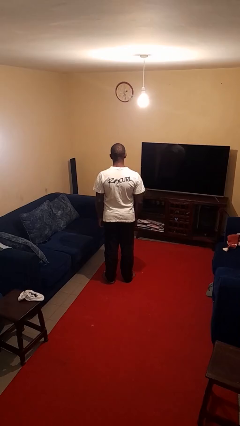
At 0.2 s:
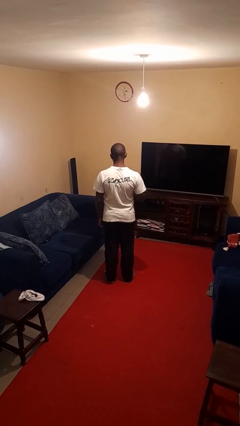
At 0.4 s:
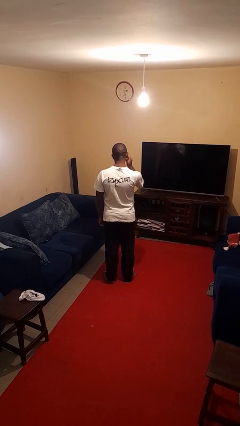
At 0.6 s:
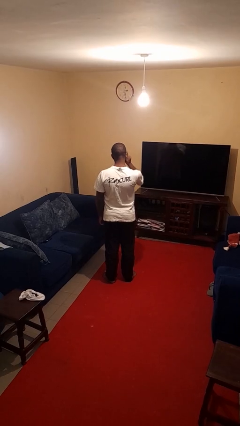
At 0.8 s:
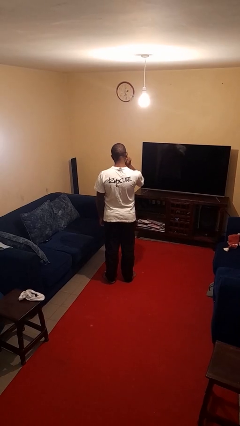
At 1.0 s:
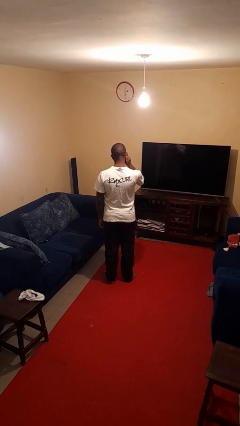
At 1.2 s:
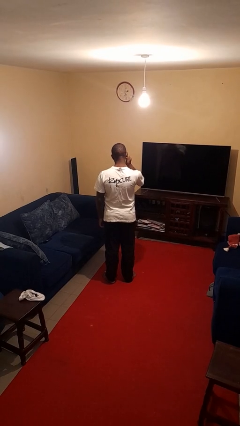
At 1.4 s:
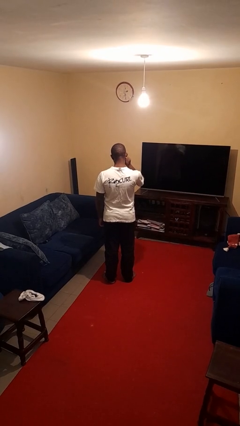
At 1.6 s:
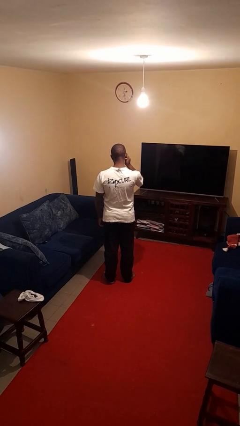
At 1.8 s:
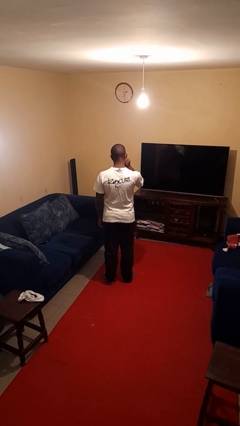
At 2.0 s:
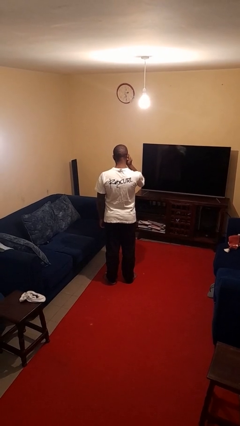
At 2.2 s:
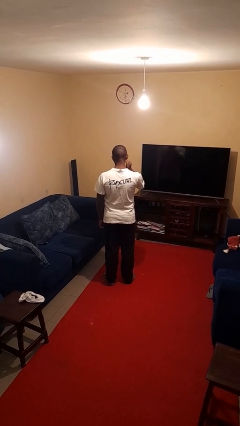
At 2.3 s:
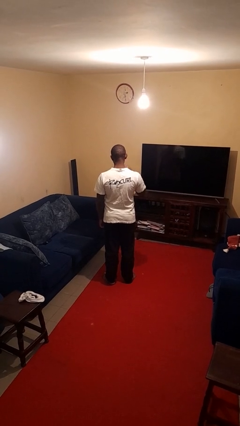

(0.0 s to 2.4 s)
person touches earlobe

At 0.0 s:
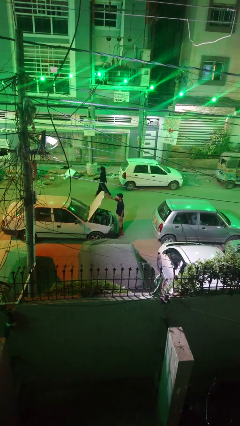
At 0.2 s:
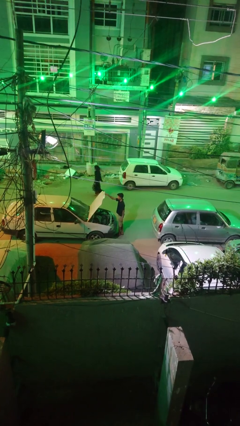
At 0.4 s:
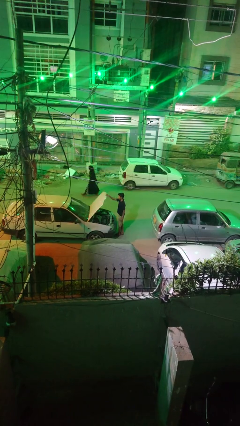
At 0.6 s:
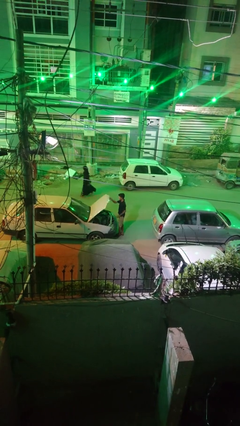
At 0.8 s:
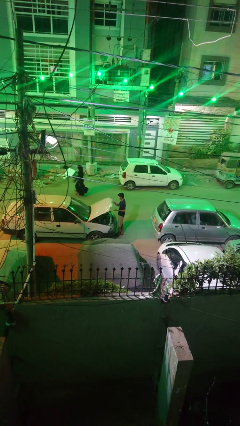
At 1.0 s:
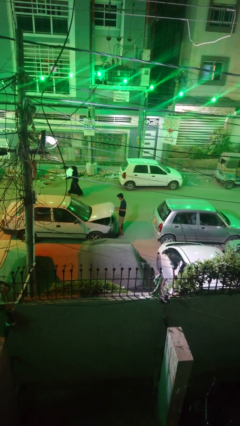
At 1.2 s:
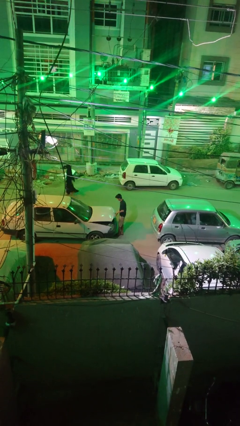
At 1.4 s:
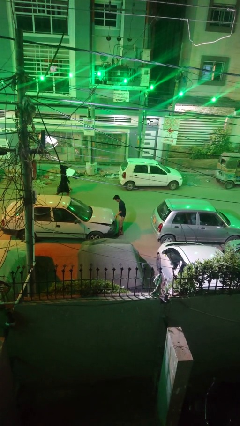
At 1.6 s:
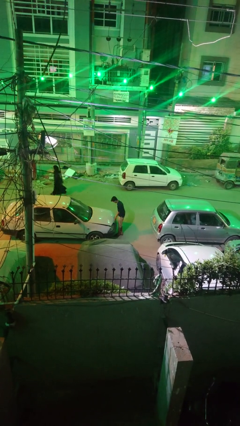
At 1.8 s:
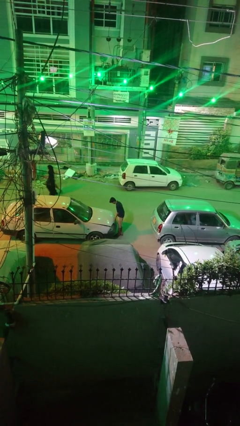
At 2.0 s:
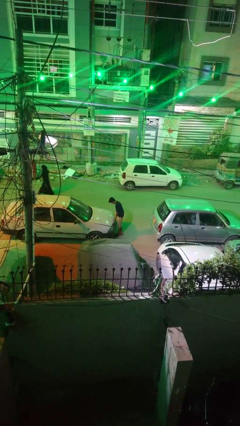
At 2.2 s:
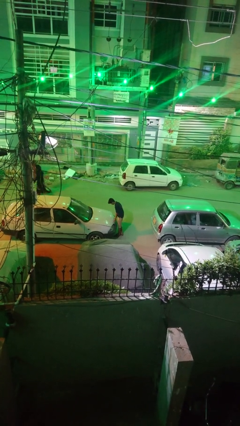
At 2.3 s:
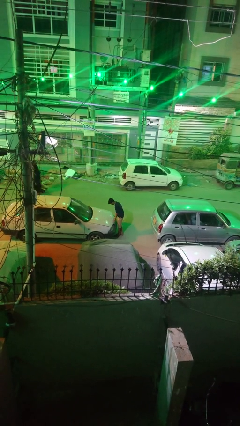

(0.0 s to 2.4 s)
person closes car hood

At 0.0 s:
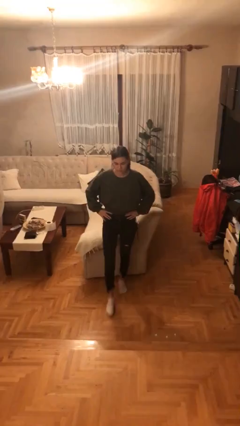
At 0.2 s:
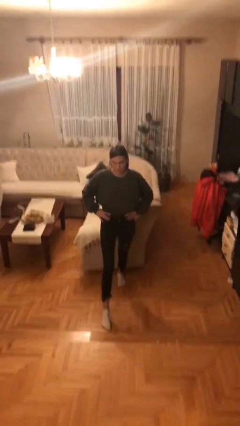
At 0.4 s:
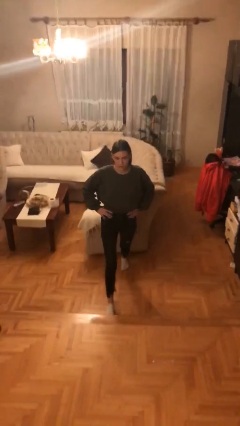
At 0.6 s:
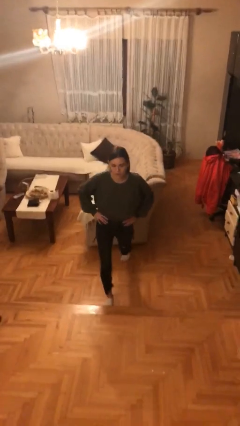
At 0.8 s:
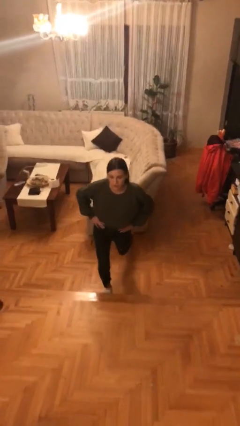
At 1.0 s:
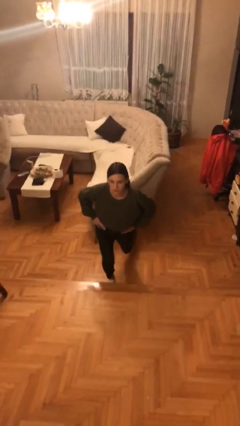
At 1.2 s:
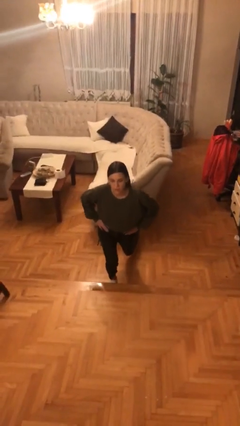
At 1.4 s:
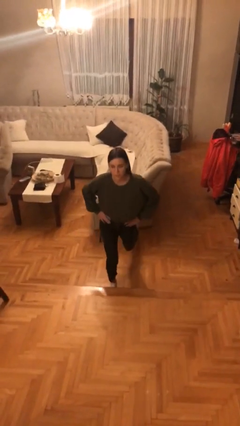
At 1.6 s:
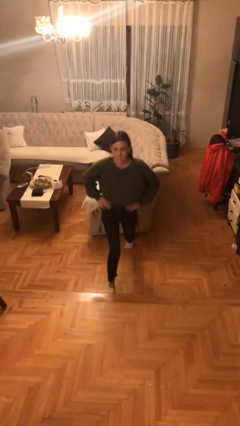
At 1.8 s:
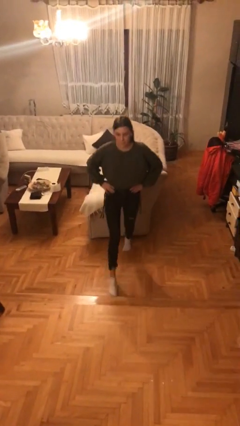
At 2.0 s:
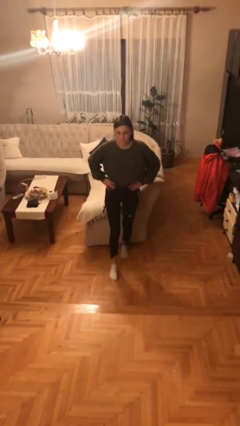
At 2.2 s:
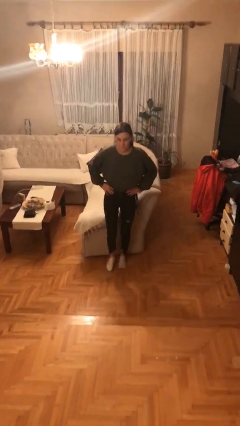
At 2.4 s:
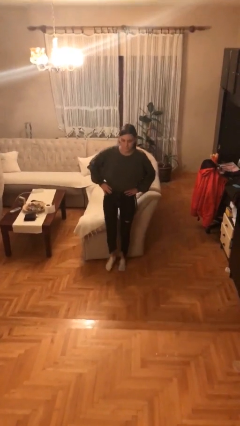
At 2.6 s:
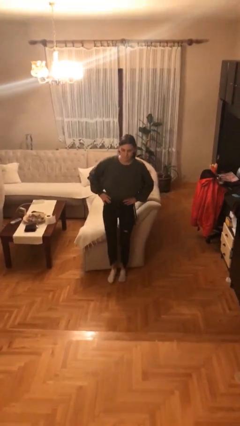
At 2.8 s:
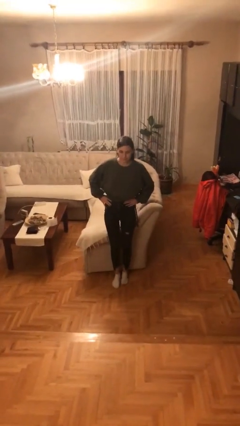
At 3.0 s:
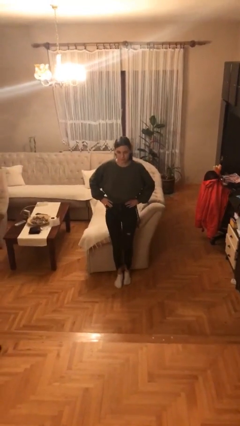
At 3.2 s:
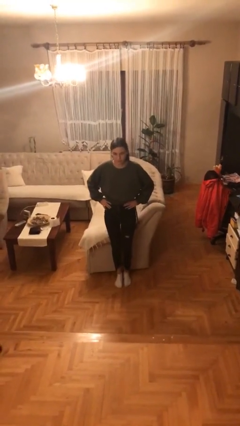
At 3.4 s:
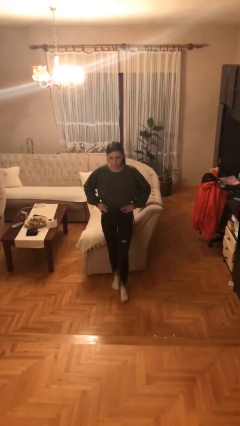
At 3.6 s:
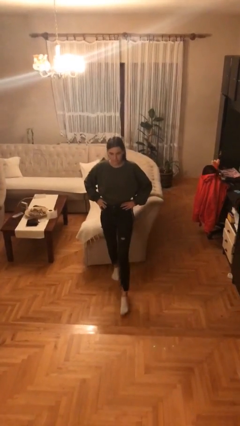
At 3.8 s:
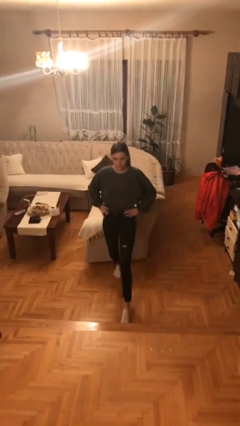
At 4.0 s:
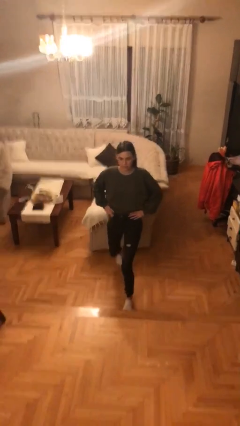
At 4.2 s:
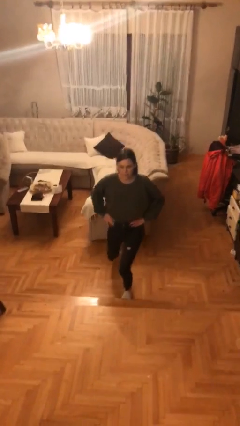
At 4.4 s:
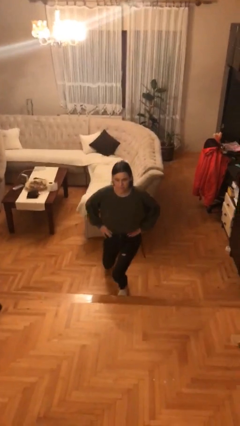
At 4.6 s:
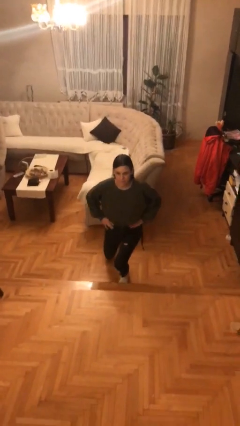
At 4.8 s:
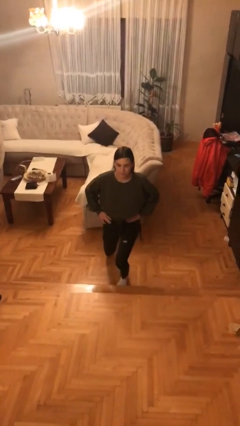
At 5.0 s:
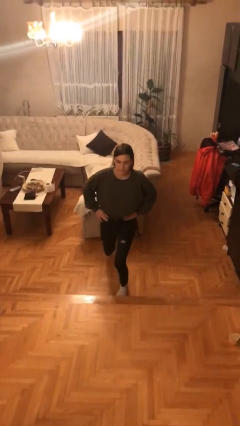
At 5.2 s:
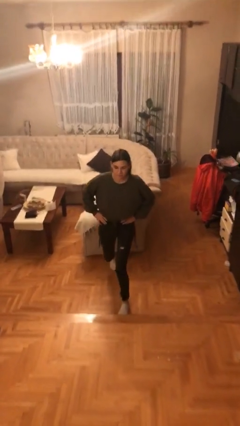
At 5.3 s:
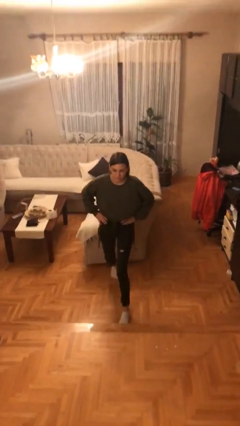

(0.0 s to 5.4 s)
person exercises with lunges

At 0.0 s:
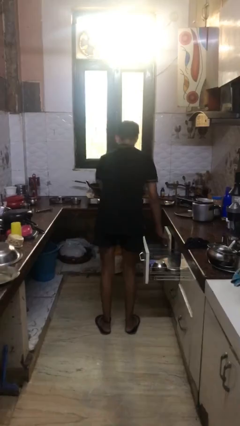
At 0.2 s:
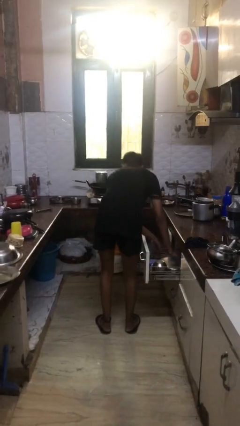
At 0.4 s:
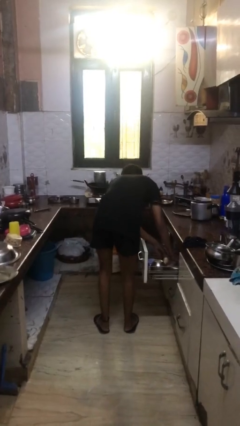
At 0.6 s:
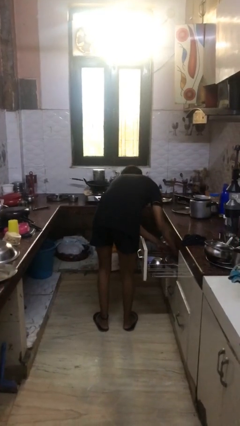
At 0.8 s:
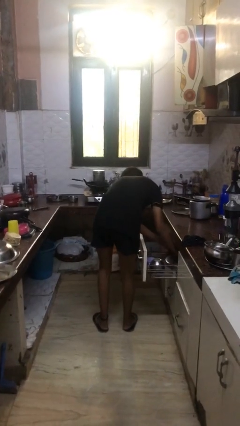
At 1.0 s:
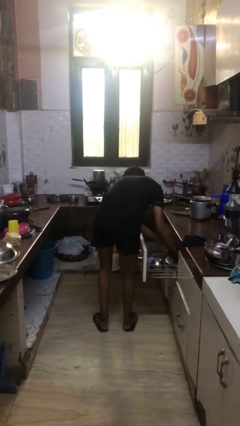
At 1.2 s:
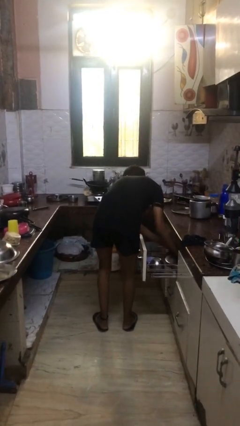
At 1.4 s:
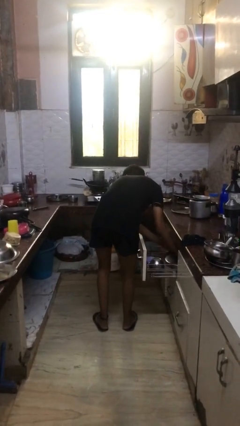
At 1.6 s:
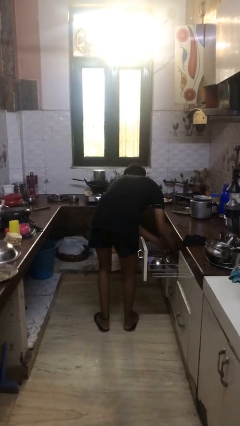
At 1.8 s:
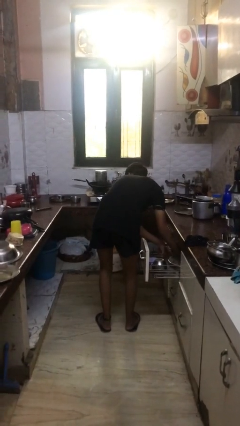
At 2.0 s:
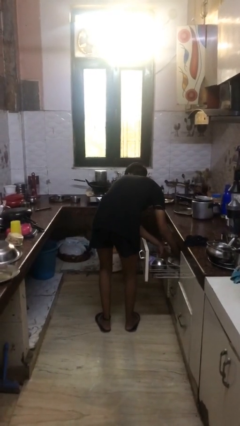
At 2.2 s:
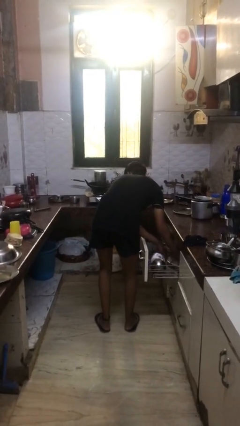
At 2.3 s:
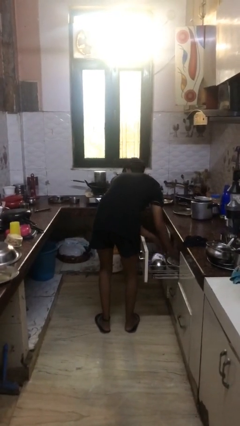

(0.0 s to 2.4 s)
person searches in kitchen drawer

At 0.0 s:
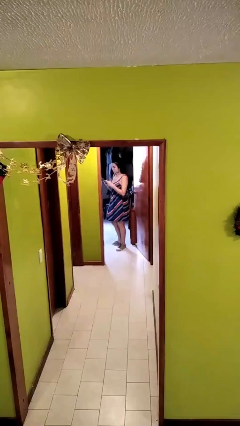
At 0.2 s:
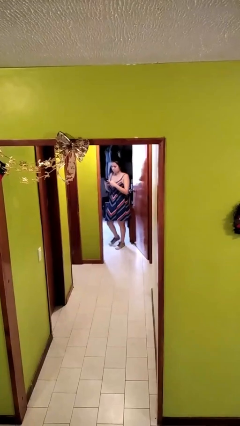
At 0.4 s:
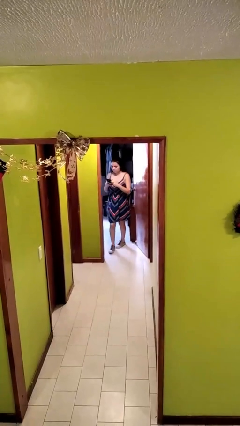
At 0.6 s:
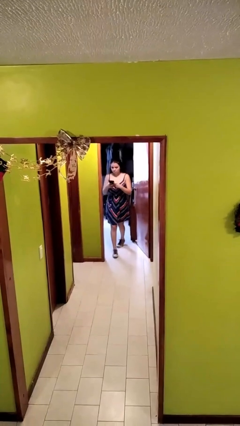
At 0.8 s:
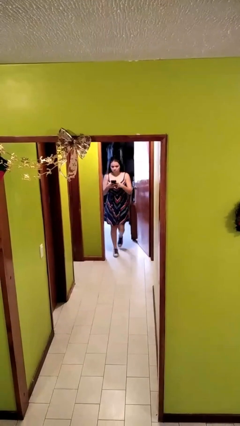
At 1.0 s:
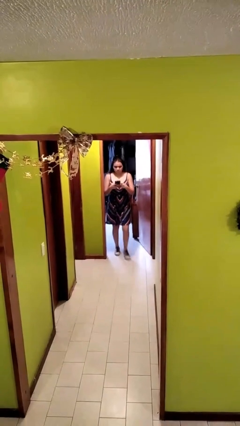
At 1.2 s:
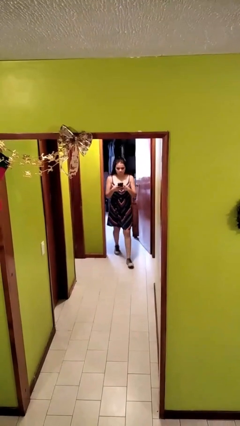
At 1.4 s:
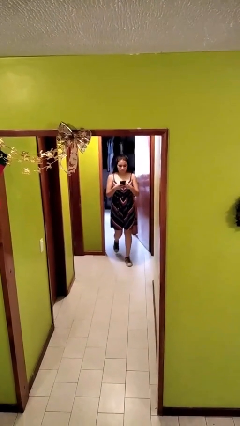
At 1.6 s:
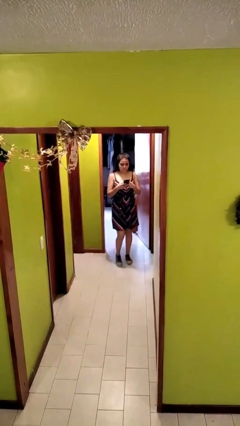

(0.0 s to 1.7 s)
person exits scene through structure

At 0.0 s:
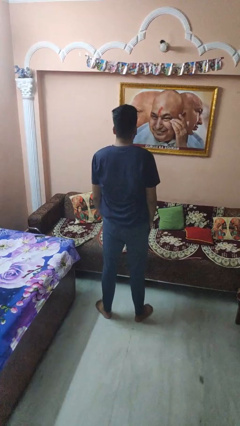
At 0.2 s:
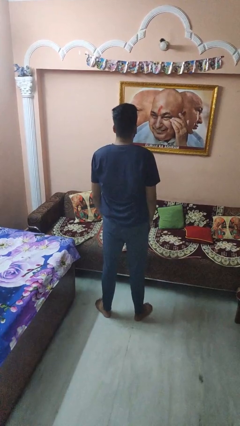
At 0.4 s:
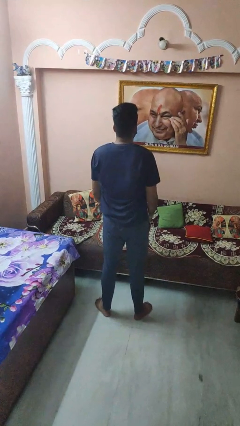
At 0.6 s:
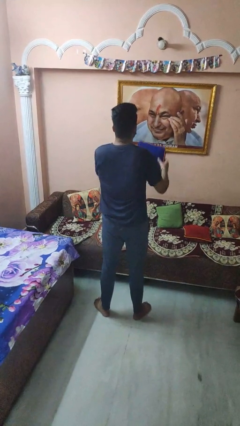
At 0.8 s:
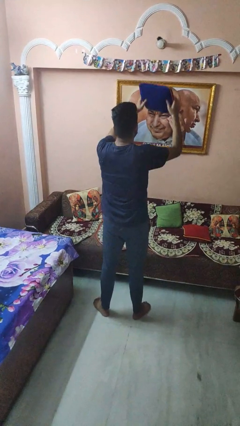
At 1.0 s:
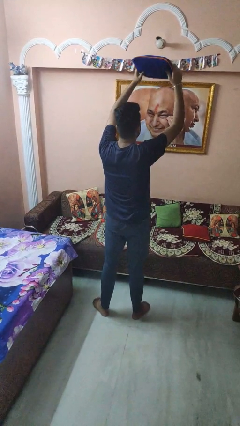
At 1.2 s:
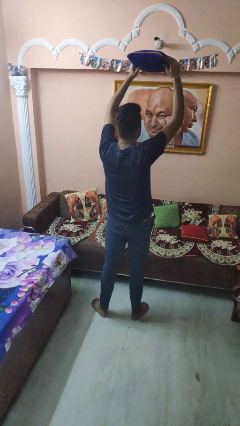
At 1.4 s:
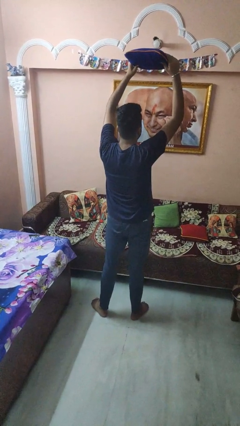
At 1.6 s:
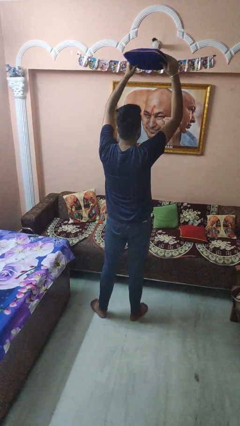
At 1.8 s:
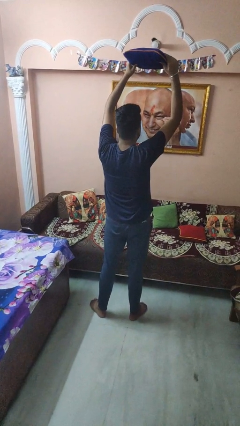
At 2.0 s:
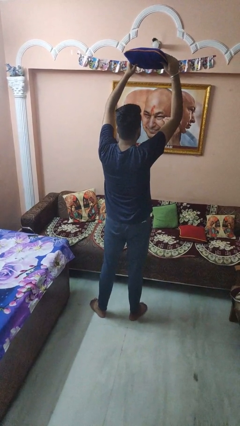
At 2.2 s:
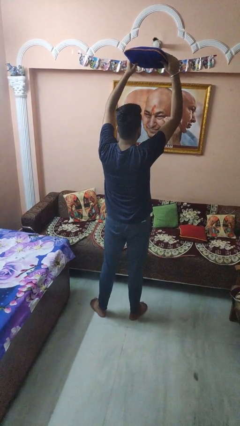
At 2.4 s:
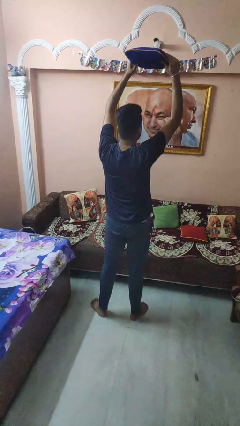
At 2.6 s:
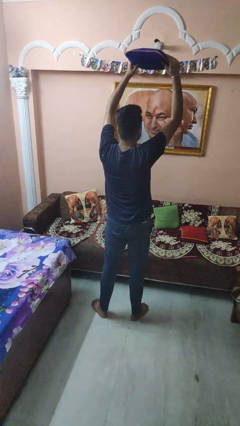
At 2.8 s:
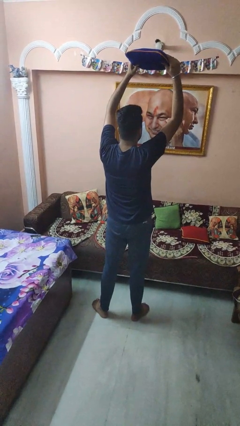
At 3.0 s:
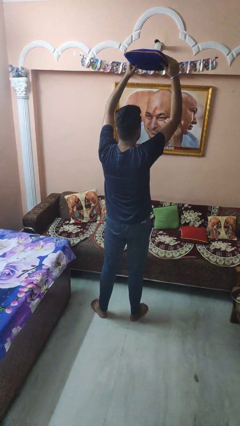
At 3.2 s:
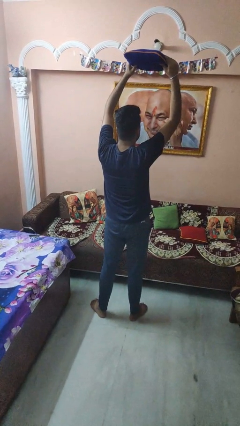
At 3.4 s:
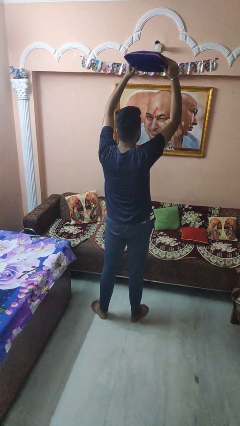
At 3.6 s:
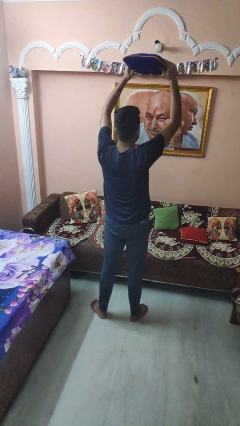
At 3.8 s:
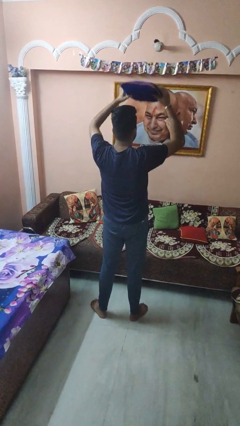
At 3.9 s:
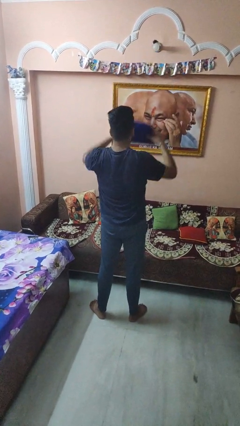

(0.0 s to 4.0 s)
person holds object above head
